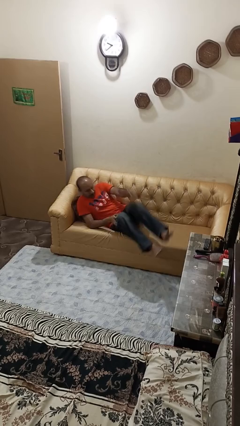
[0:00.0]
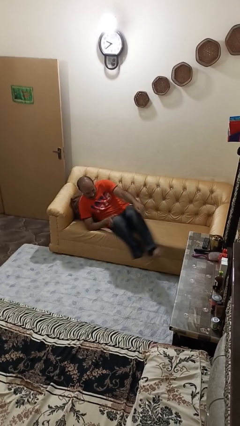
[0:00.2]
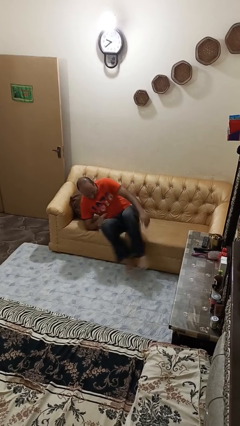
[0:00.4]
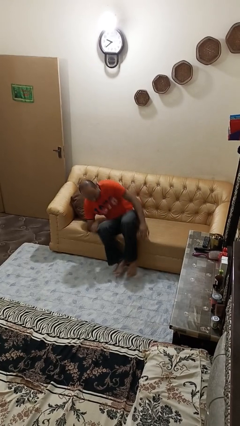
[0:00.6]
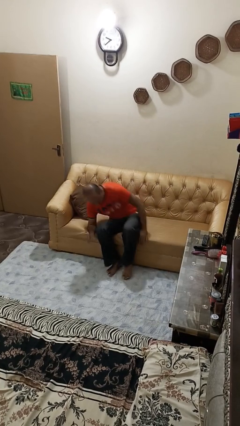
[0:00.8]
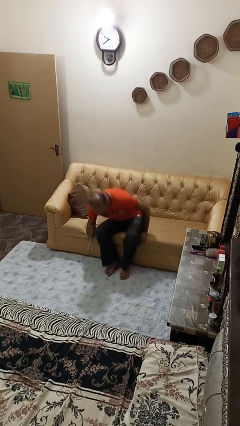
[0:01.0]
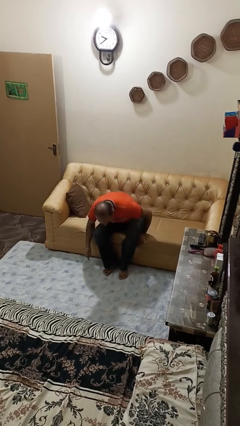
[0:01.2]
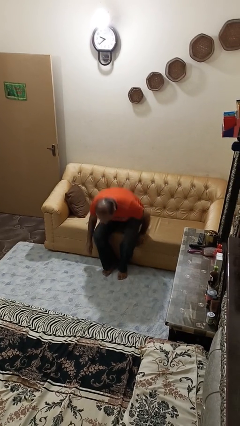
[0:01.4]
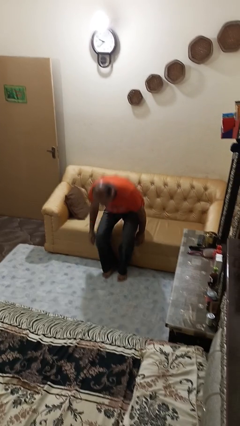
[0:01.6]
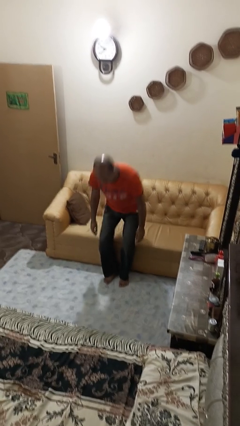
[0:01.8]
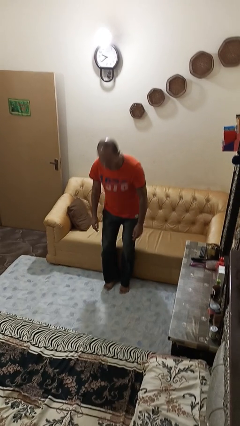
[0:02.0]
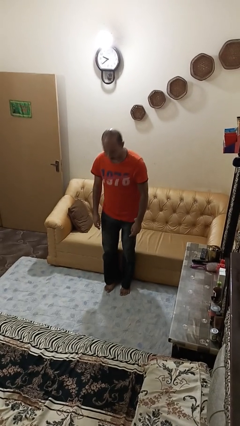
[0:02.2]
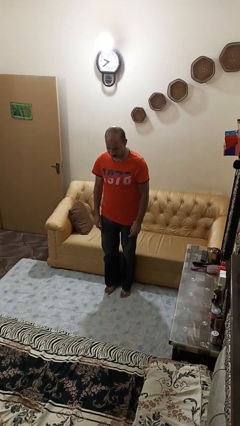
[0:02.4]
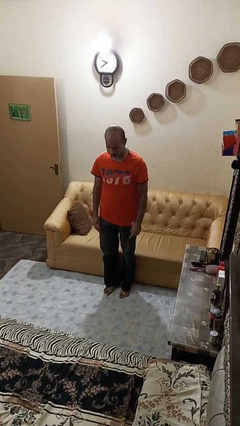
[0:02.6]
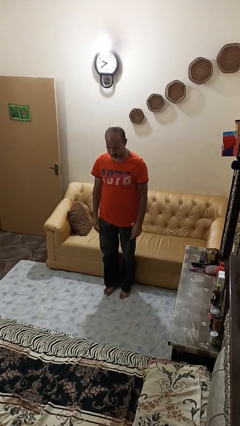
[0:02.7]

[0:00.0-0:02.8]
person stands up

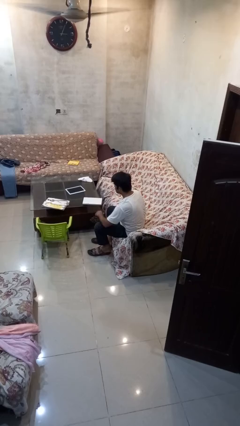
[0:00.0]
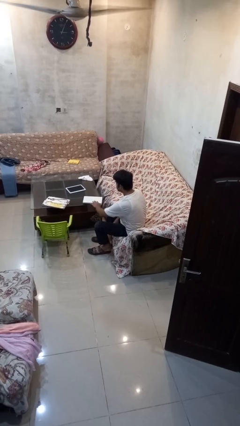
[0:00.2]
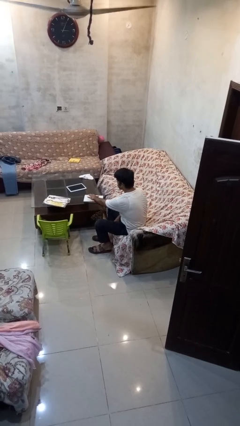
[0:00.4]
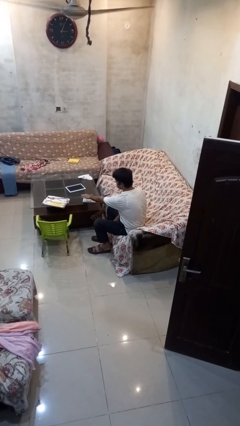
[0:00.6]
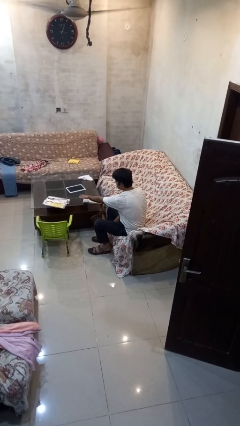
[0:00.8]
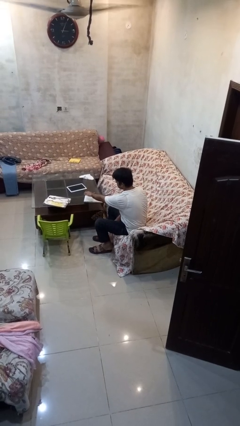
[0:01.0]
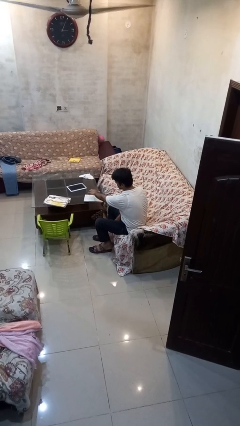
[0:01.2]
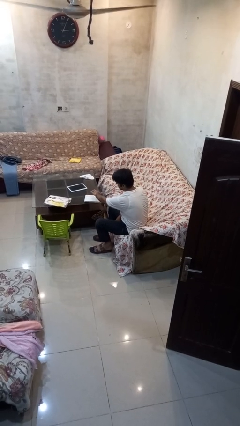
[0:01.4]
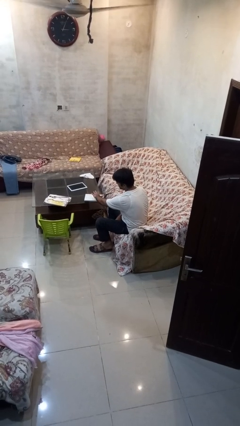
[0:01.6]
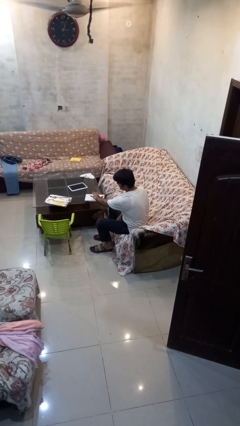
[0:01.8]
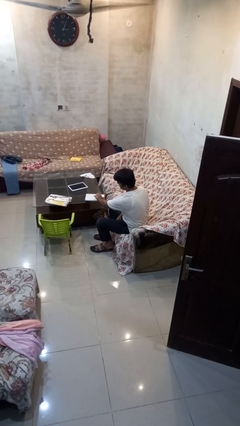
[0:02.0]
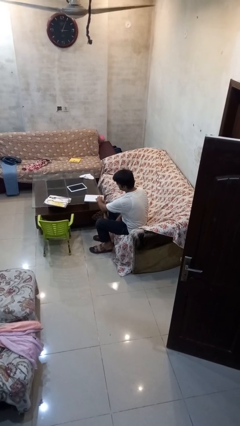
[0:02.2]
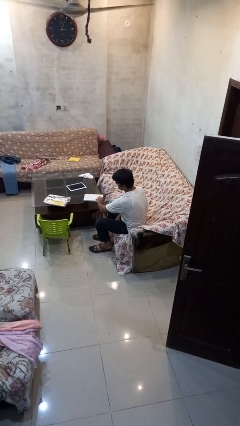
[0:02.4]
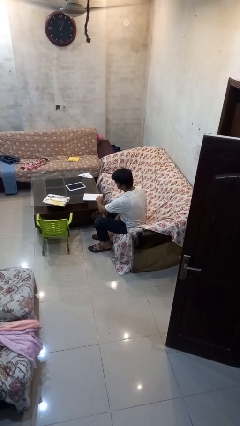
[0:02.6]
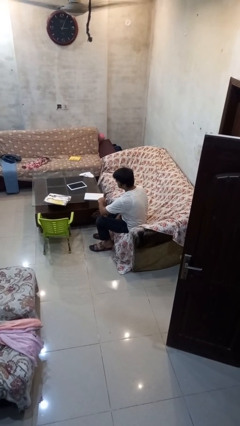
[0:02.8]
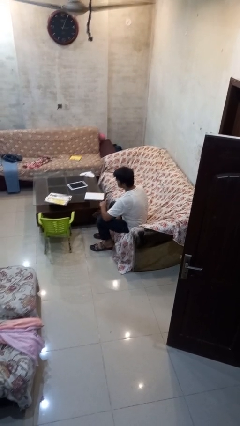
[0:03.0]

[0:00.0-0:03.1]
person waves hand over object

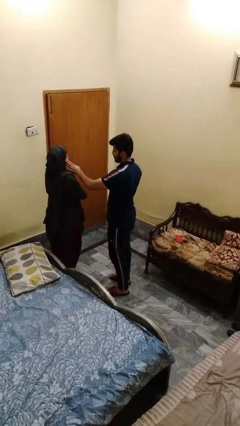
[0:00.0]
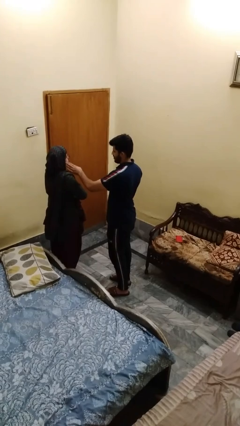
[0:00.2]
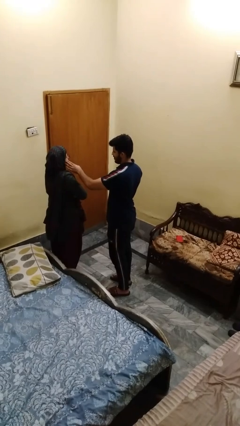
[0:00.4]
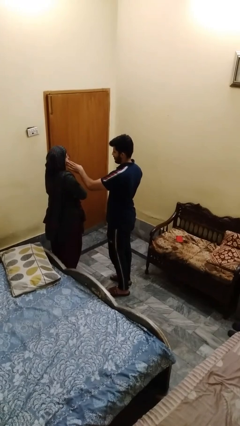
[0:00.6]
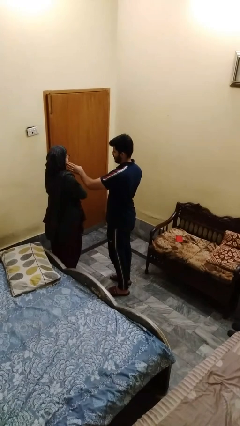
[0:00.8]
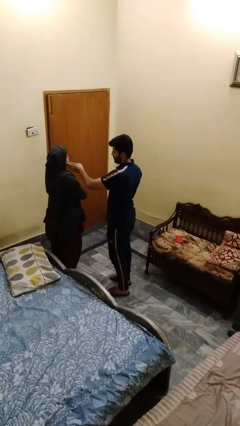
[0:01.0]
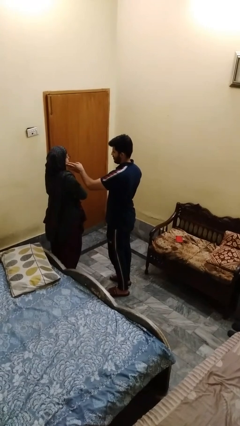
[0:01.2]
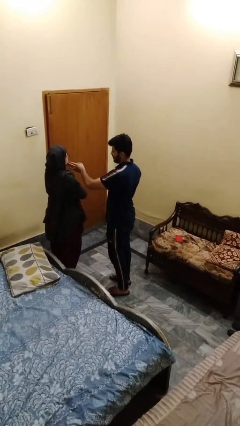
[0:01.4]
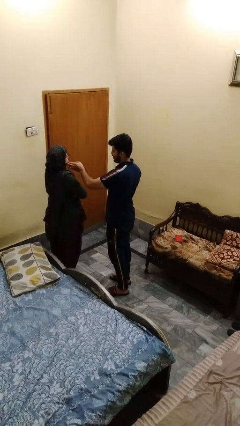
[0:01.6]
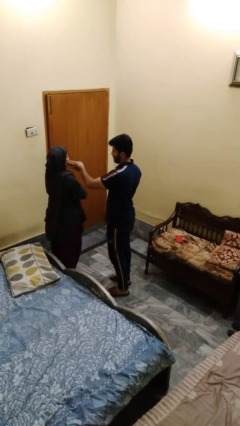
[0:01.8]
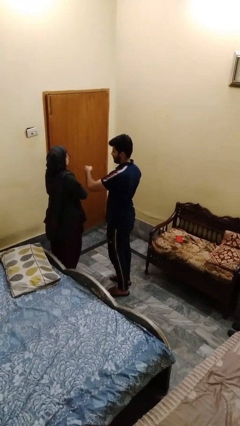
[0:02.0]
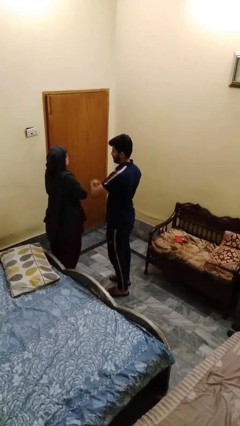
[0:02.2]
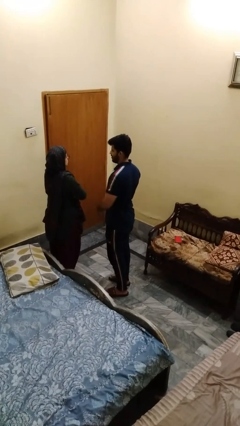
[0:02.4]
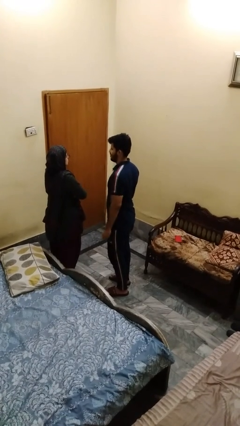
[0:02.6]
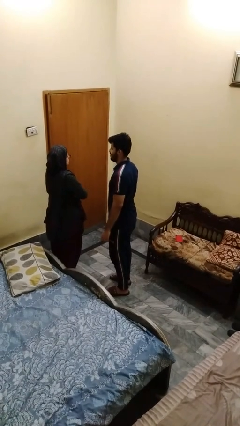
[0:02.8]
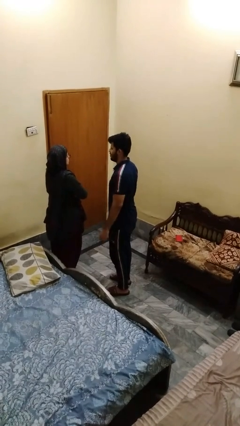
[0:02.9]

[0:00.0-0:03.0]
person touches face of person

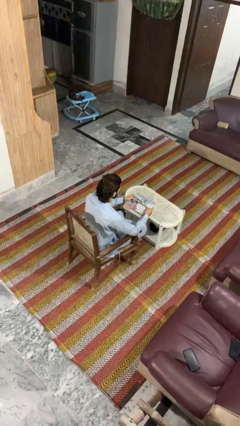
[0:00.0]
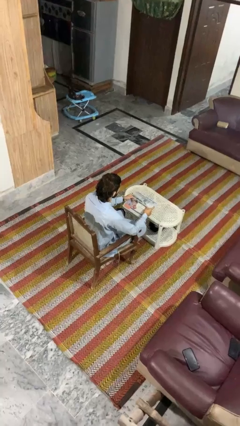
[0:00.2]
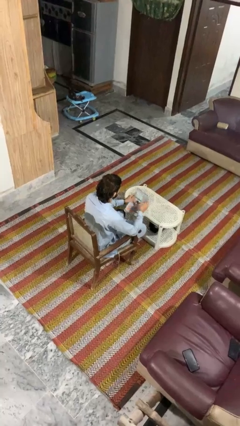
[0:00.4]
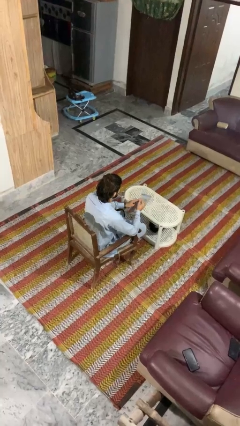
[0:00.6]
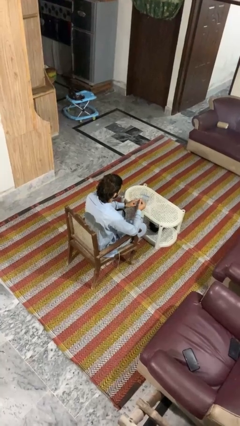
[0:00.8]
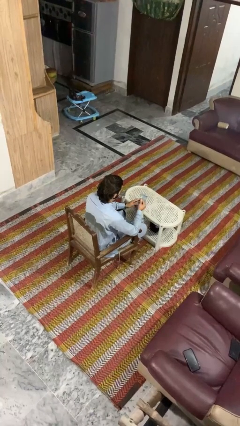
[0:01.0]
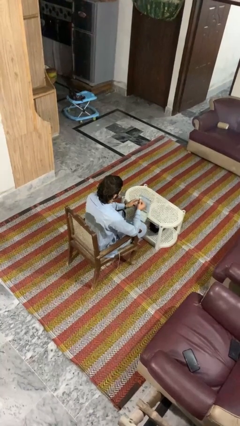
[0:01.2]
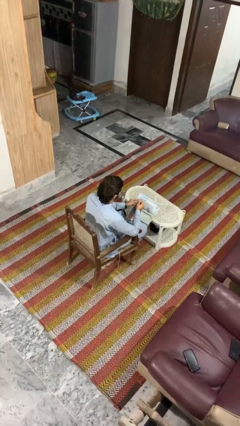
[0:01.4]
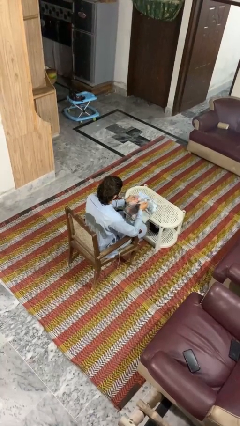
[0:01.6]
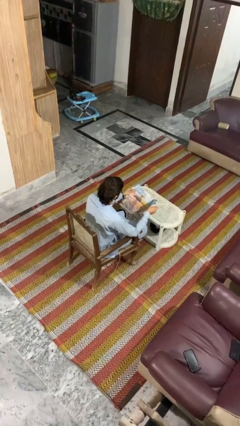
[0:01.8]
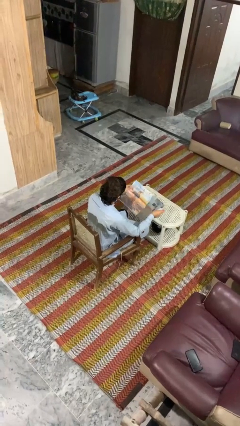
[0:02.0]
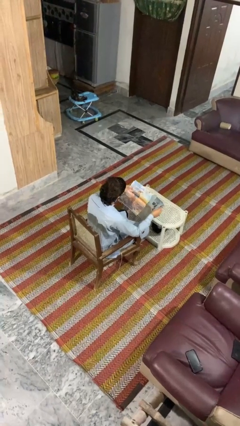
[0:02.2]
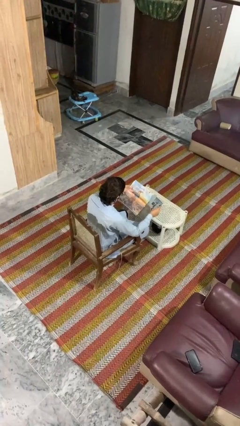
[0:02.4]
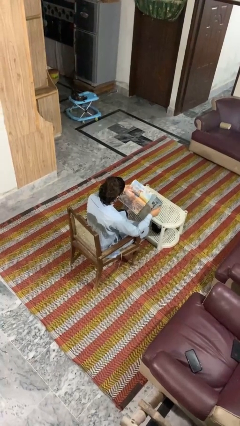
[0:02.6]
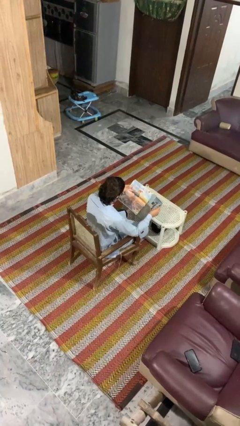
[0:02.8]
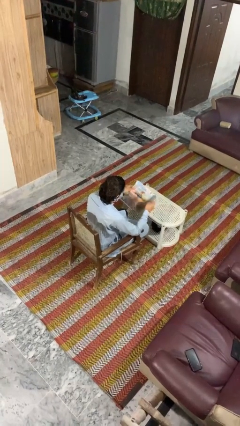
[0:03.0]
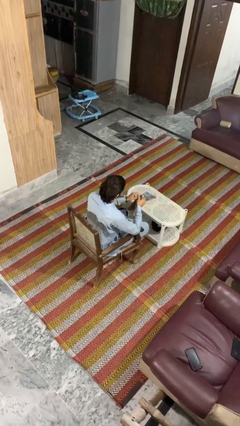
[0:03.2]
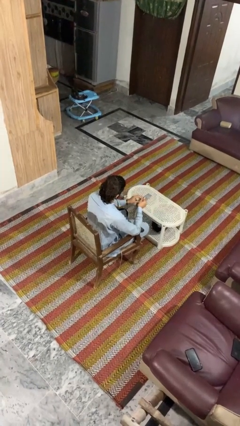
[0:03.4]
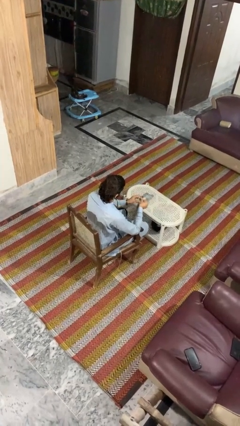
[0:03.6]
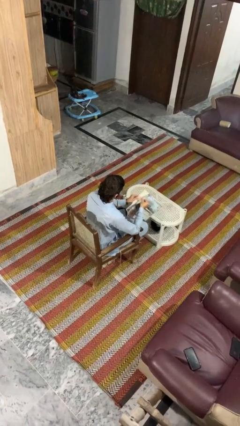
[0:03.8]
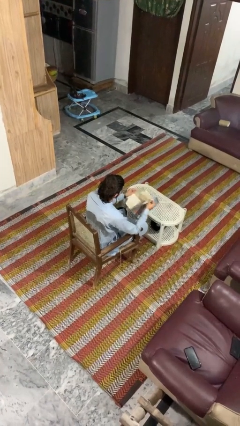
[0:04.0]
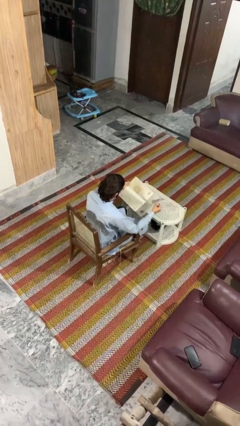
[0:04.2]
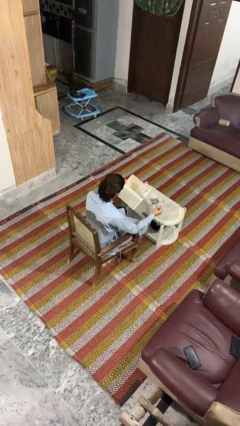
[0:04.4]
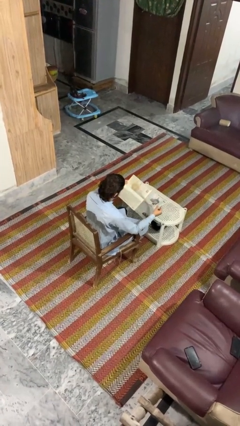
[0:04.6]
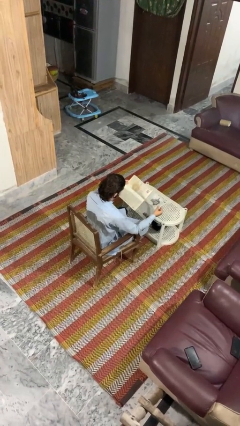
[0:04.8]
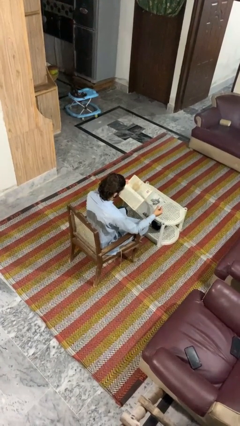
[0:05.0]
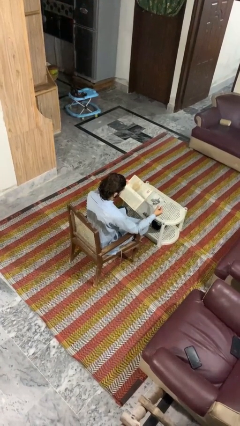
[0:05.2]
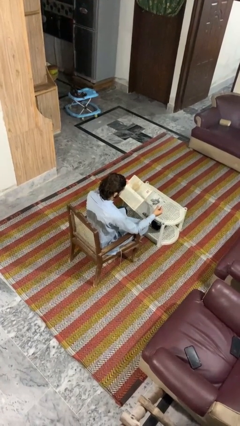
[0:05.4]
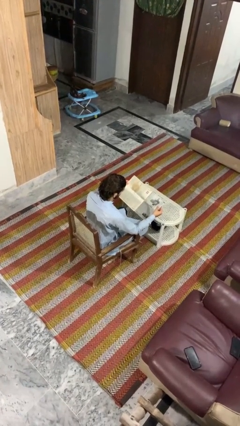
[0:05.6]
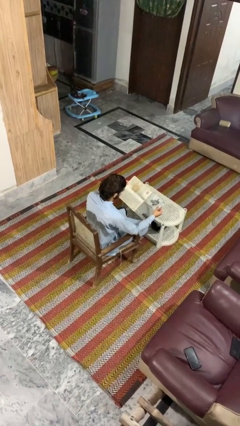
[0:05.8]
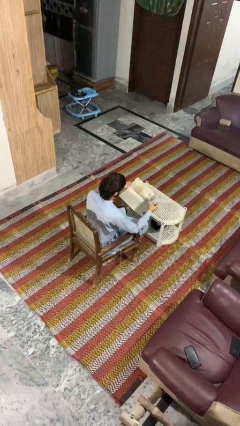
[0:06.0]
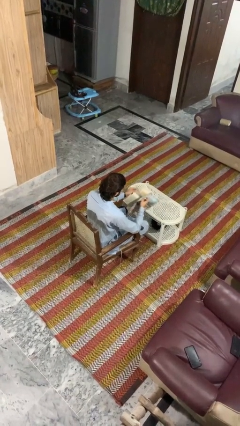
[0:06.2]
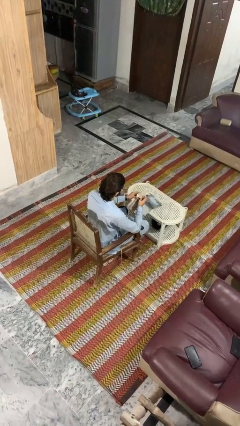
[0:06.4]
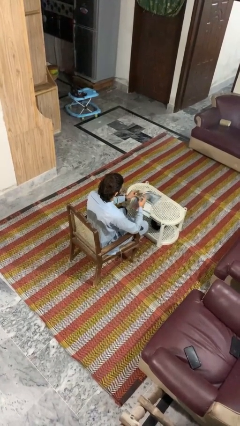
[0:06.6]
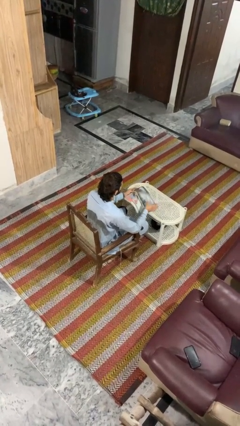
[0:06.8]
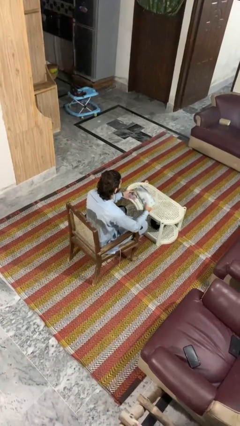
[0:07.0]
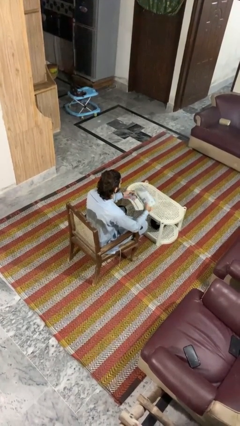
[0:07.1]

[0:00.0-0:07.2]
person reads magazine

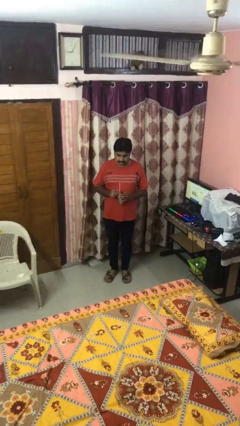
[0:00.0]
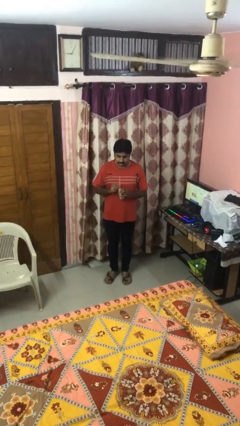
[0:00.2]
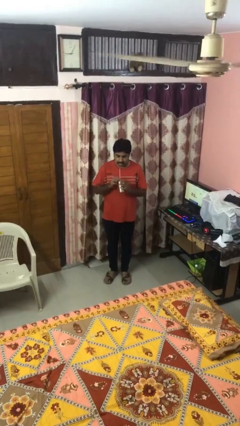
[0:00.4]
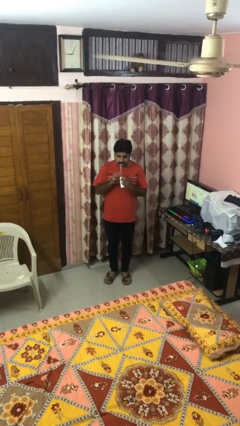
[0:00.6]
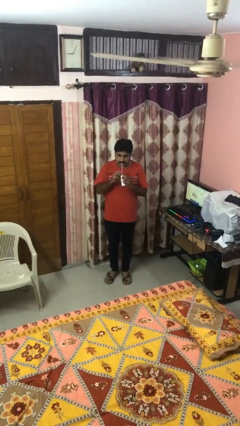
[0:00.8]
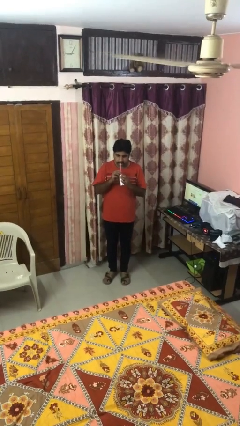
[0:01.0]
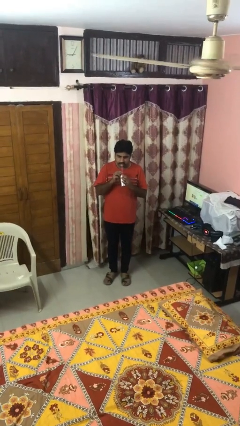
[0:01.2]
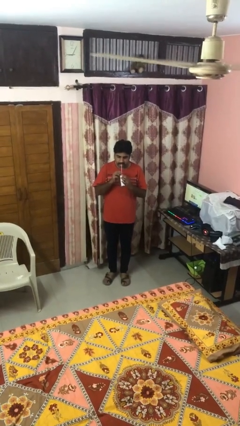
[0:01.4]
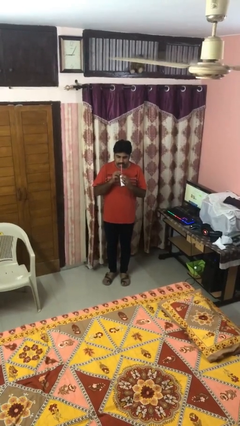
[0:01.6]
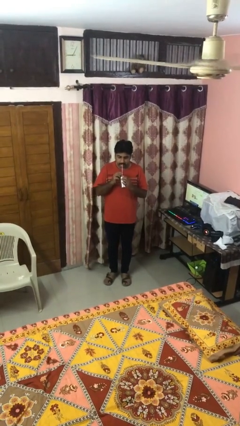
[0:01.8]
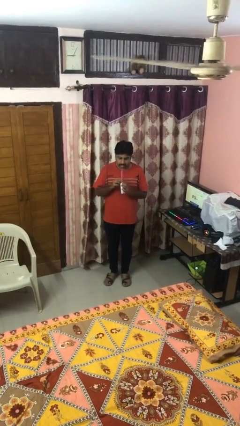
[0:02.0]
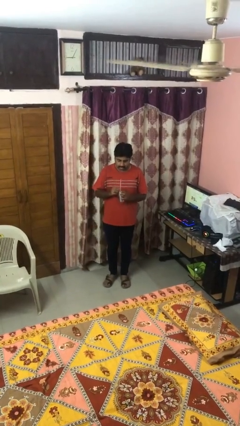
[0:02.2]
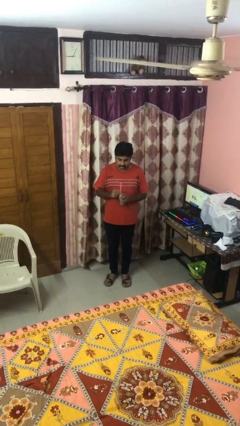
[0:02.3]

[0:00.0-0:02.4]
person drinks from straw
